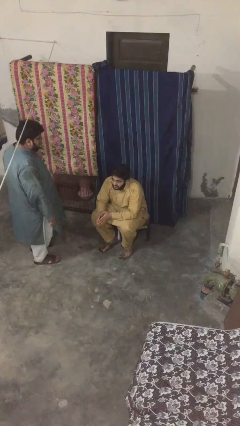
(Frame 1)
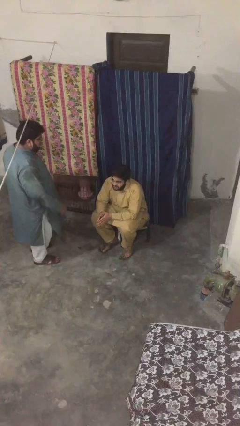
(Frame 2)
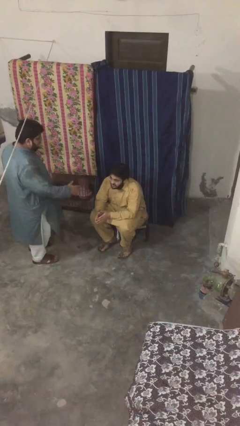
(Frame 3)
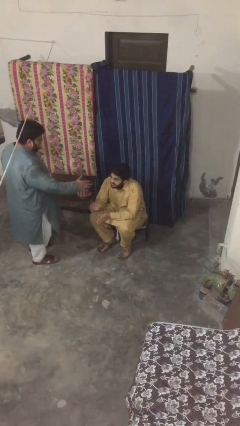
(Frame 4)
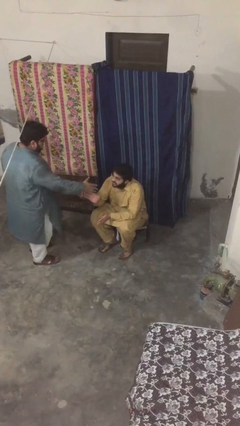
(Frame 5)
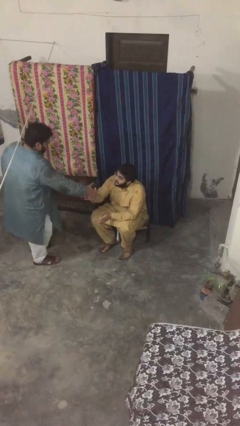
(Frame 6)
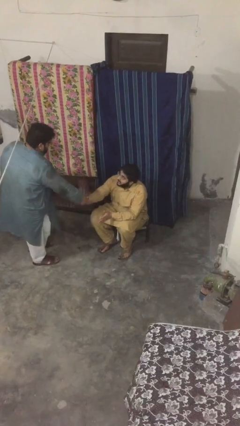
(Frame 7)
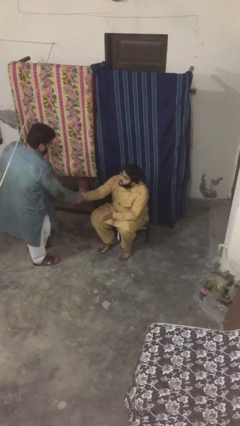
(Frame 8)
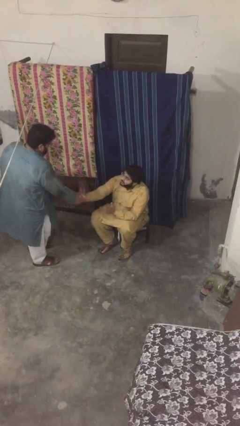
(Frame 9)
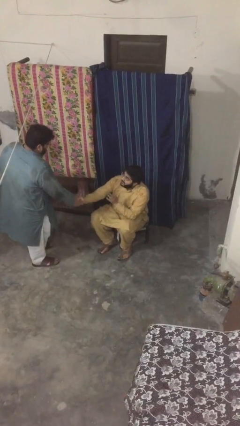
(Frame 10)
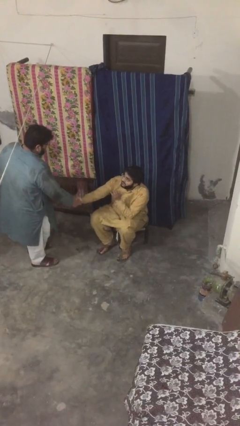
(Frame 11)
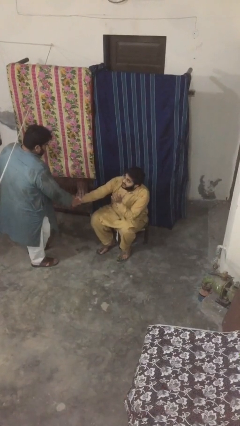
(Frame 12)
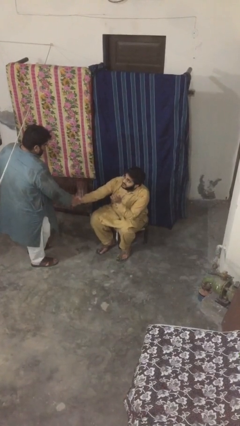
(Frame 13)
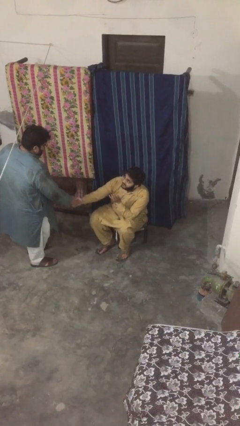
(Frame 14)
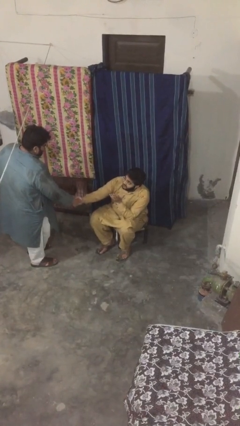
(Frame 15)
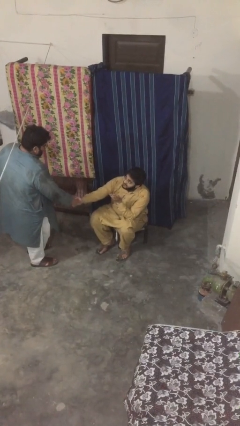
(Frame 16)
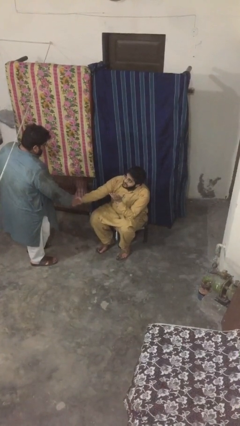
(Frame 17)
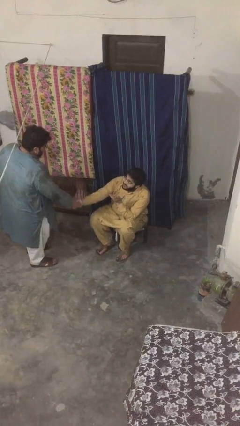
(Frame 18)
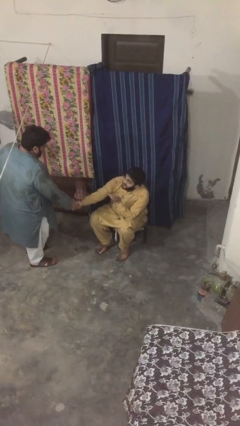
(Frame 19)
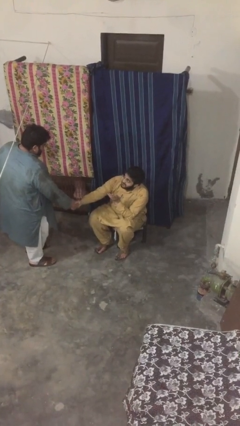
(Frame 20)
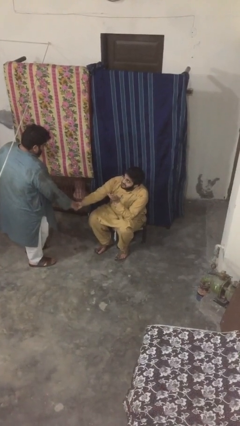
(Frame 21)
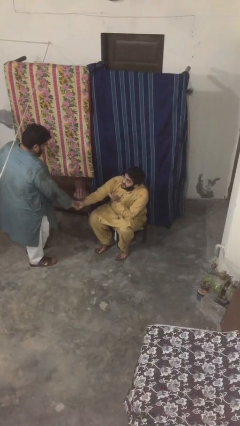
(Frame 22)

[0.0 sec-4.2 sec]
person shakes hand

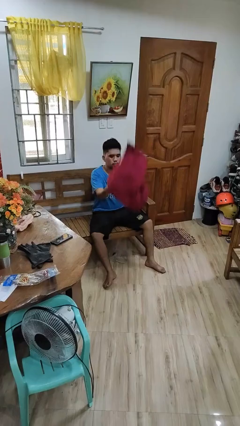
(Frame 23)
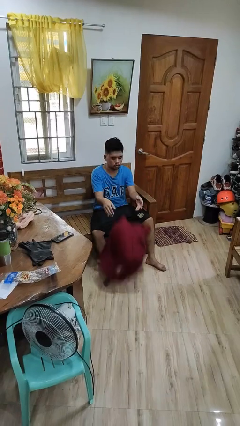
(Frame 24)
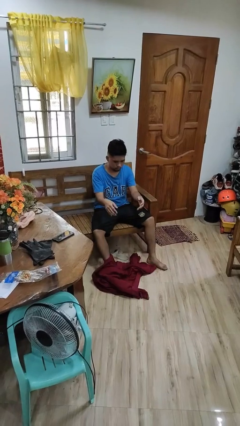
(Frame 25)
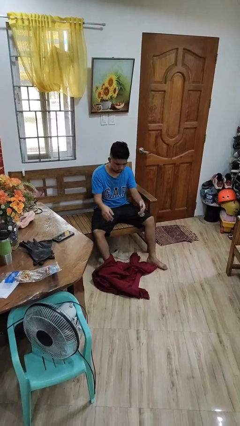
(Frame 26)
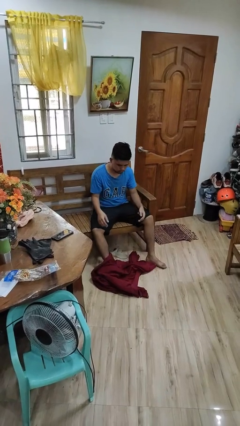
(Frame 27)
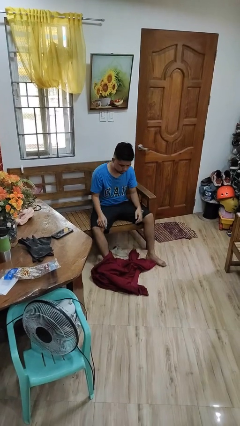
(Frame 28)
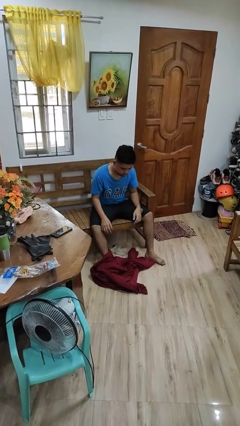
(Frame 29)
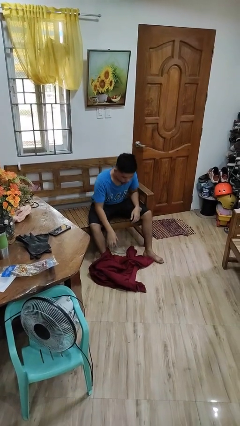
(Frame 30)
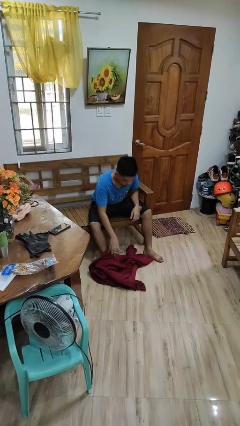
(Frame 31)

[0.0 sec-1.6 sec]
person drops object

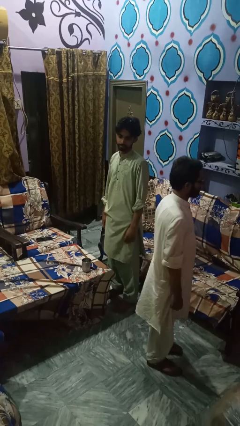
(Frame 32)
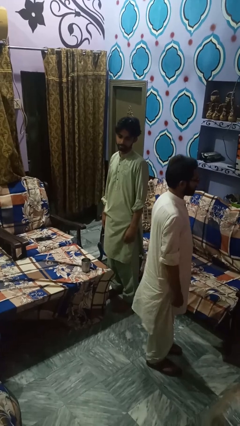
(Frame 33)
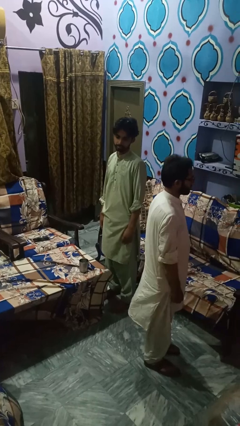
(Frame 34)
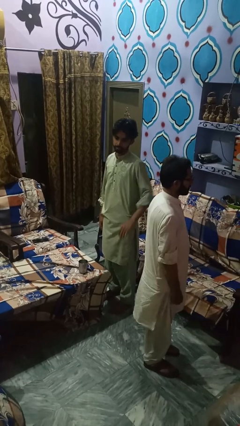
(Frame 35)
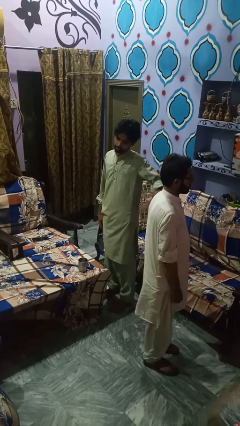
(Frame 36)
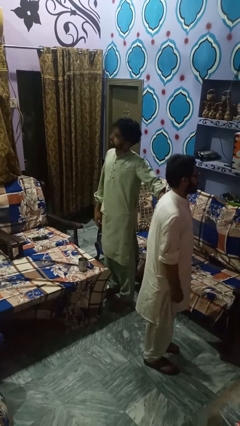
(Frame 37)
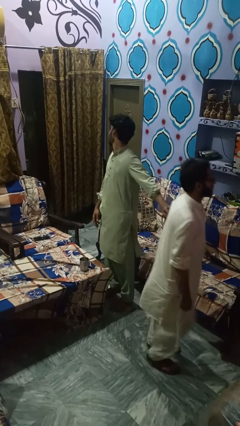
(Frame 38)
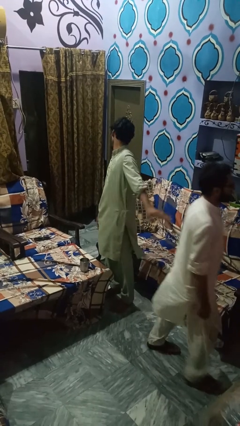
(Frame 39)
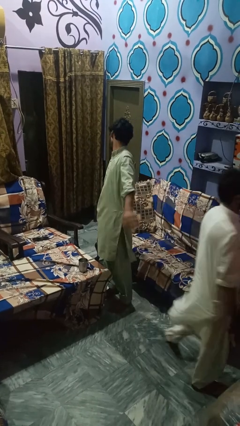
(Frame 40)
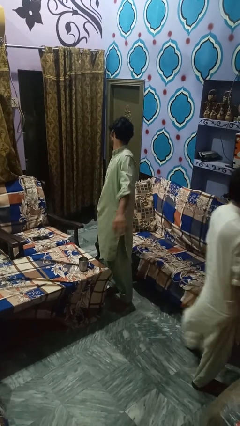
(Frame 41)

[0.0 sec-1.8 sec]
person shoves person

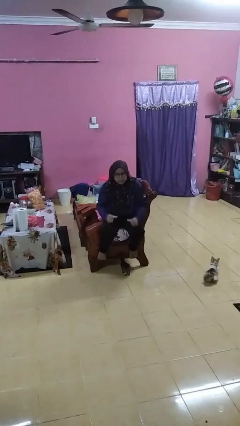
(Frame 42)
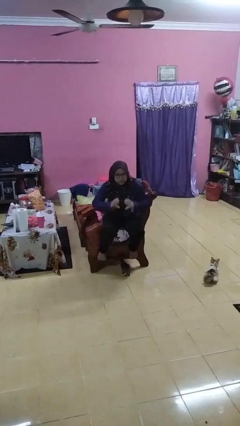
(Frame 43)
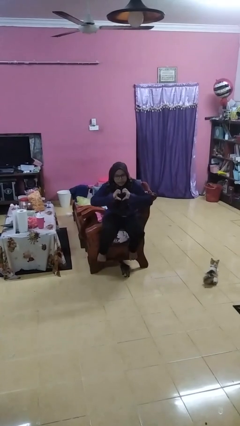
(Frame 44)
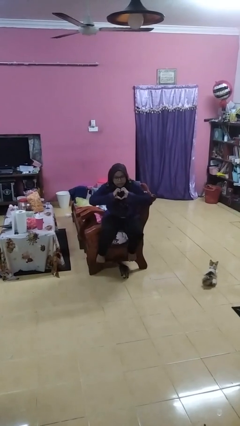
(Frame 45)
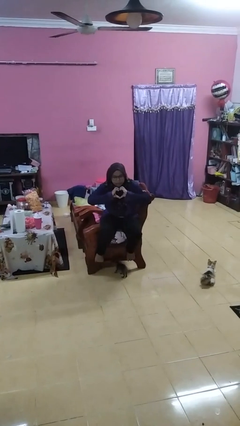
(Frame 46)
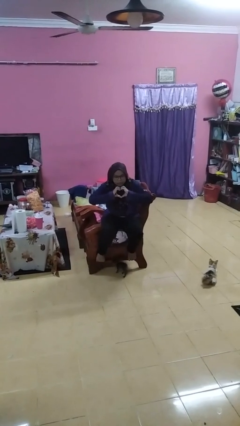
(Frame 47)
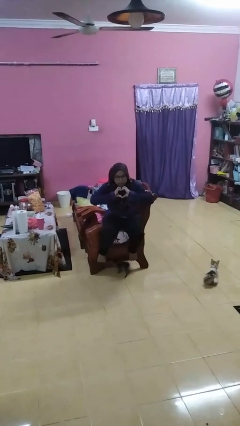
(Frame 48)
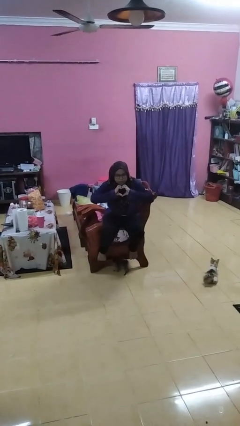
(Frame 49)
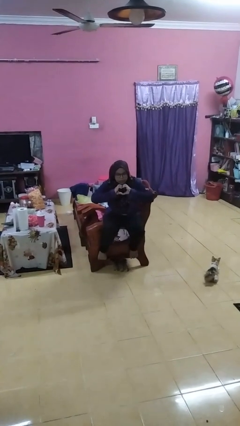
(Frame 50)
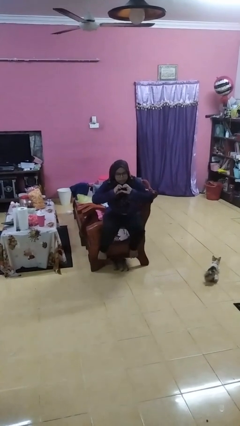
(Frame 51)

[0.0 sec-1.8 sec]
person gestures heart

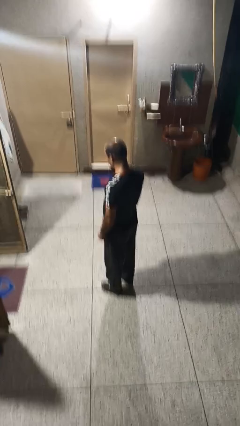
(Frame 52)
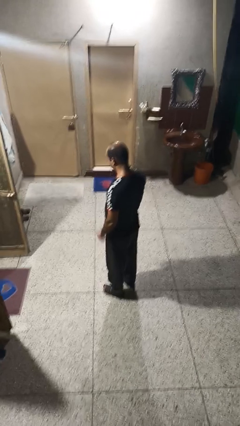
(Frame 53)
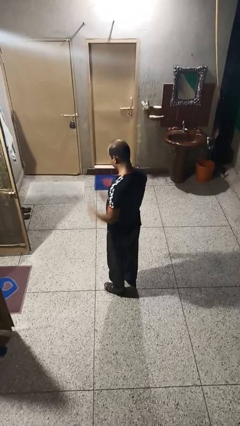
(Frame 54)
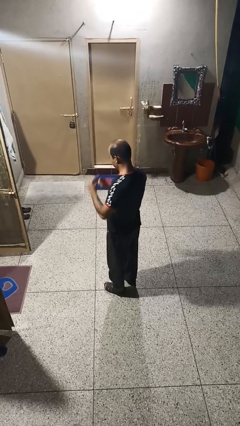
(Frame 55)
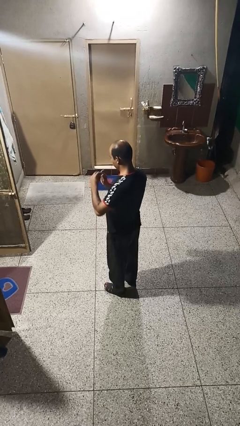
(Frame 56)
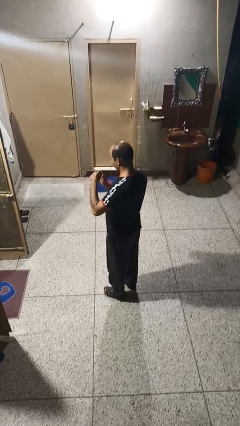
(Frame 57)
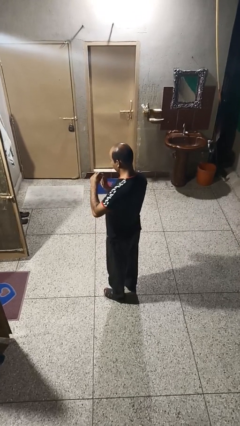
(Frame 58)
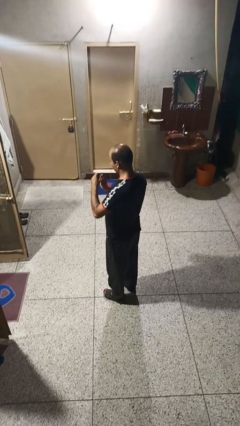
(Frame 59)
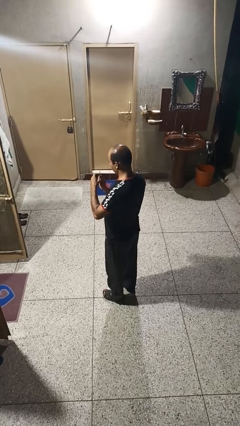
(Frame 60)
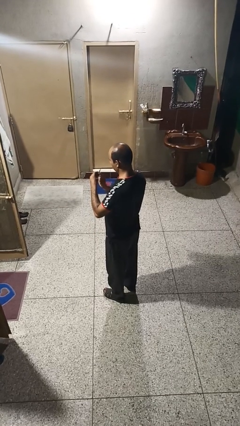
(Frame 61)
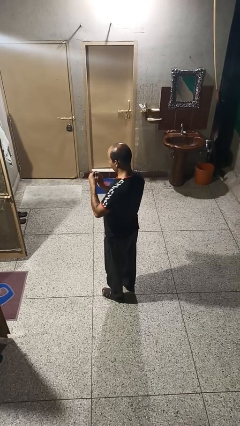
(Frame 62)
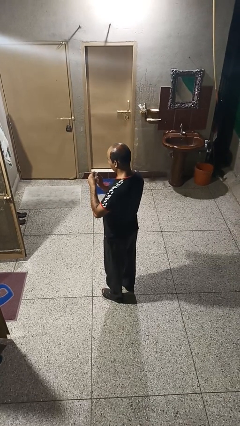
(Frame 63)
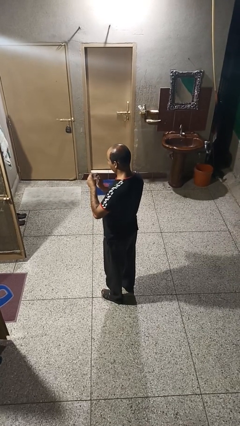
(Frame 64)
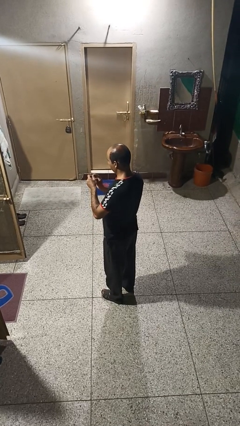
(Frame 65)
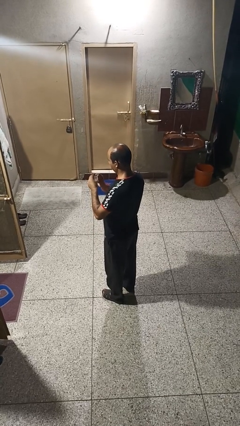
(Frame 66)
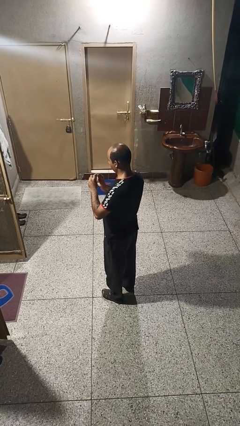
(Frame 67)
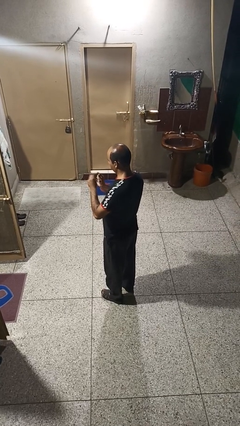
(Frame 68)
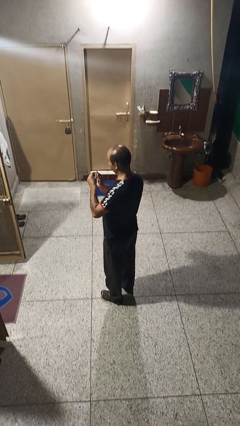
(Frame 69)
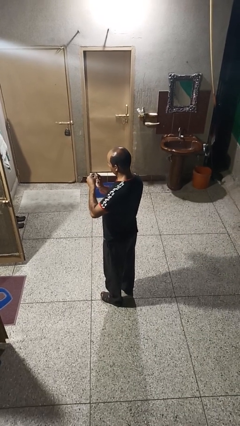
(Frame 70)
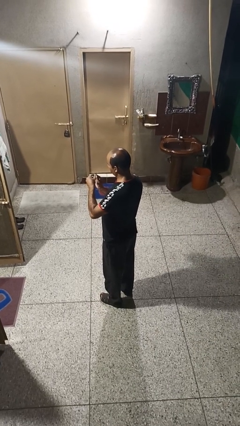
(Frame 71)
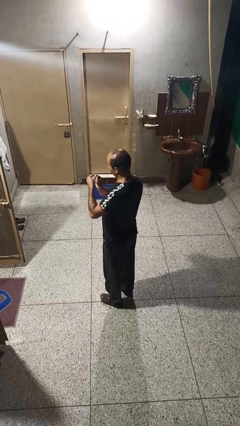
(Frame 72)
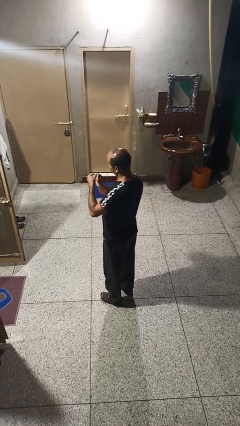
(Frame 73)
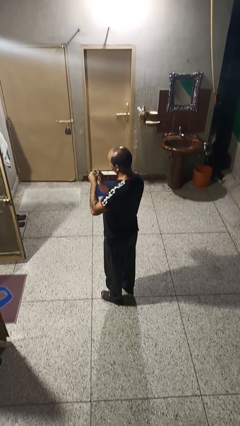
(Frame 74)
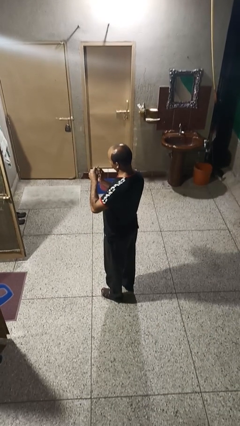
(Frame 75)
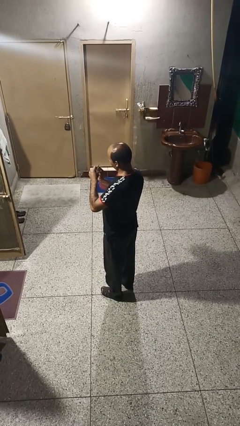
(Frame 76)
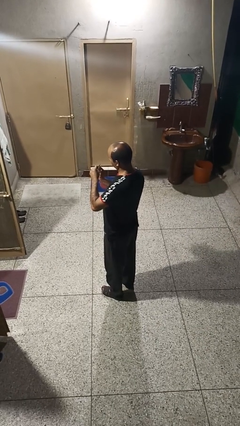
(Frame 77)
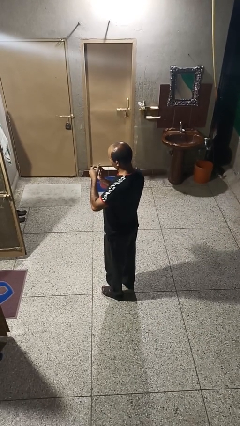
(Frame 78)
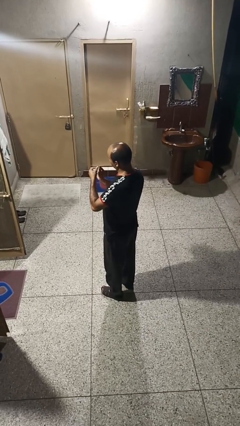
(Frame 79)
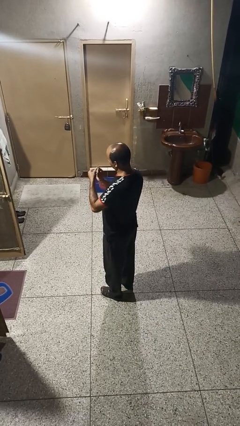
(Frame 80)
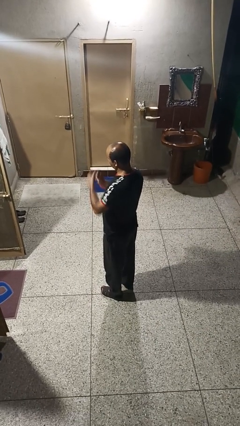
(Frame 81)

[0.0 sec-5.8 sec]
person files fingernails

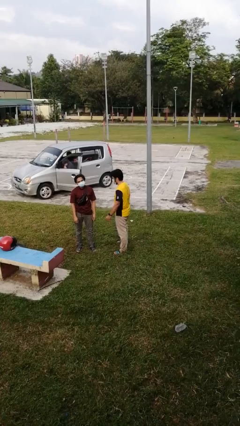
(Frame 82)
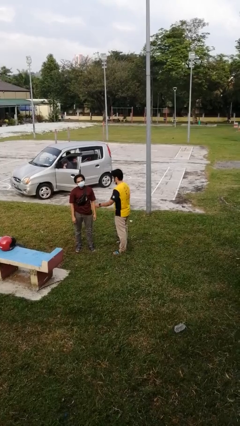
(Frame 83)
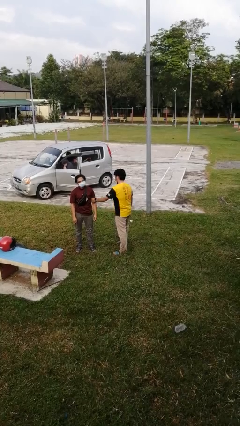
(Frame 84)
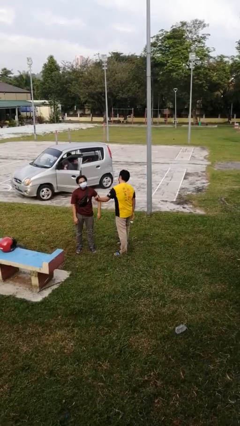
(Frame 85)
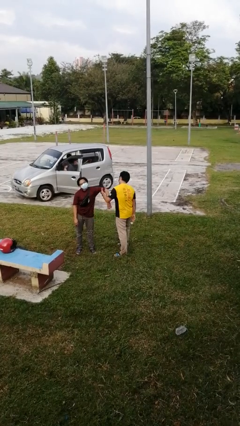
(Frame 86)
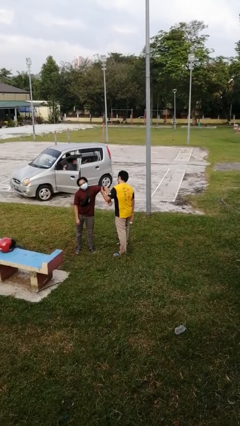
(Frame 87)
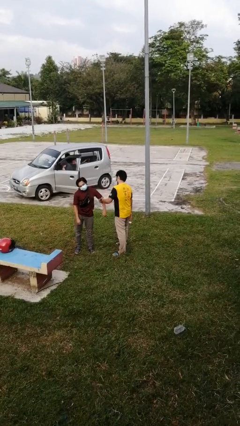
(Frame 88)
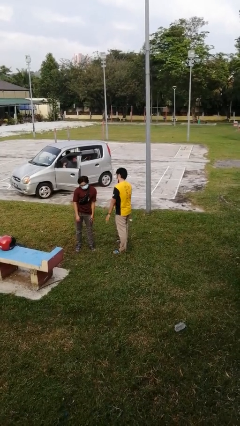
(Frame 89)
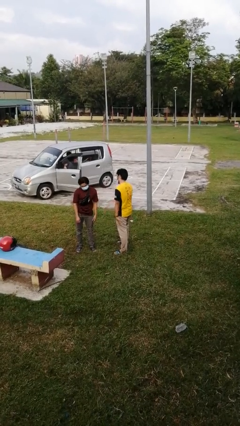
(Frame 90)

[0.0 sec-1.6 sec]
person grabs person by bicep

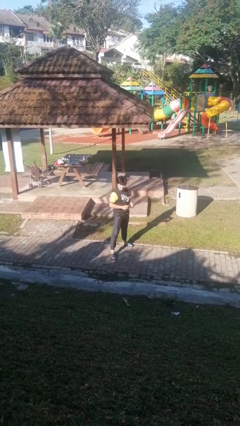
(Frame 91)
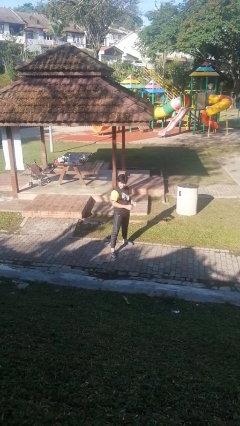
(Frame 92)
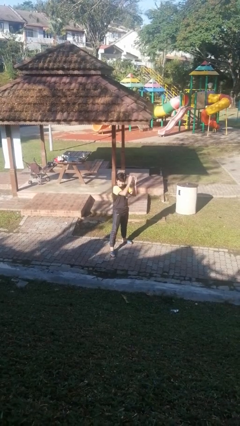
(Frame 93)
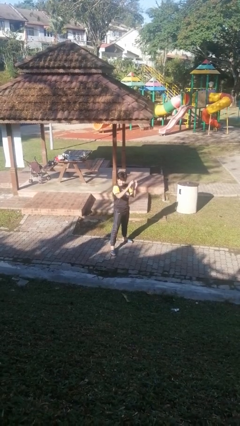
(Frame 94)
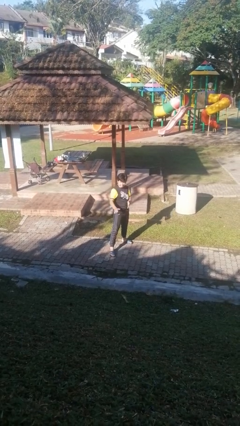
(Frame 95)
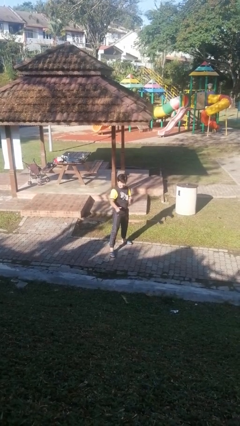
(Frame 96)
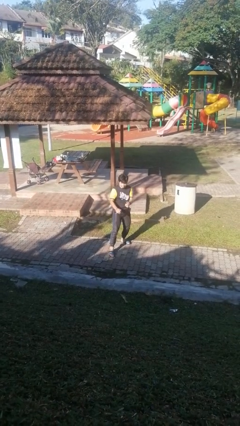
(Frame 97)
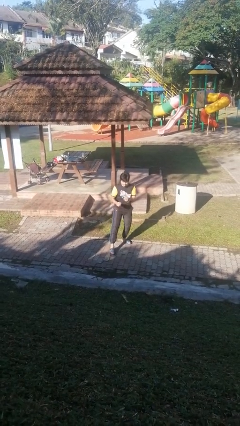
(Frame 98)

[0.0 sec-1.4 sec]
person karate chop
